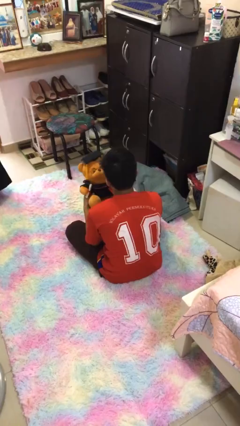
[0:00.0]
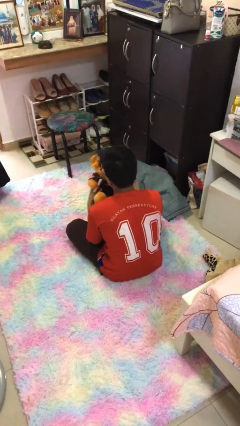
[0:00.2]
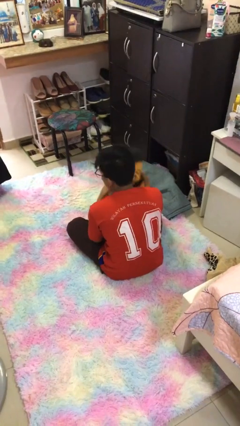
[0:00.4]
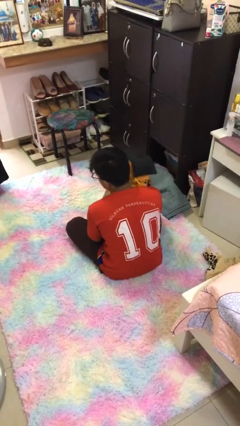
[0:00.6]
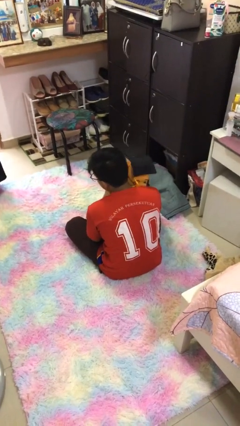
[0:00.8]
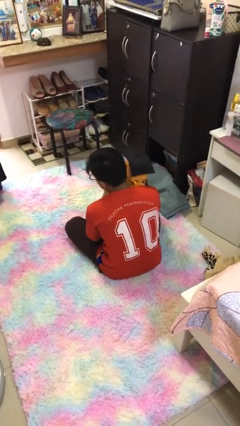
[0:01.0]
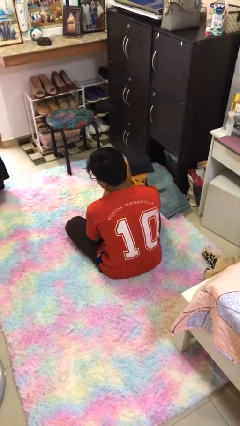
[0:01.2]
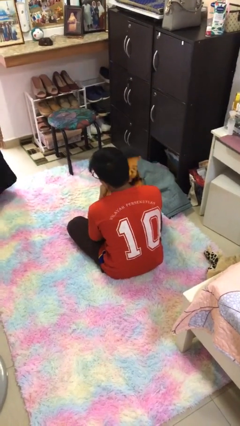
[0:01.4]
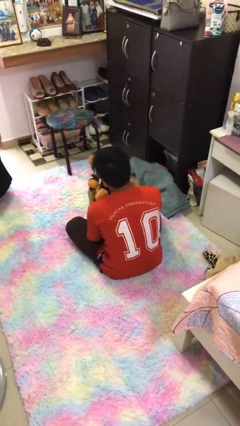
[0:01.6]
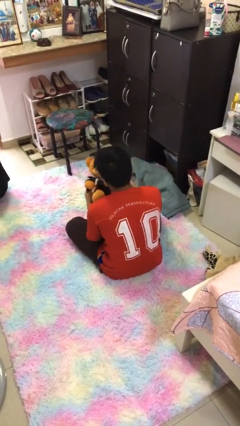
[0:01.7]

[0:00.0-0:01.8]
person hugs stuffed animal

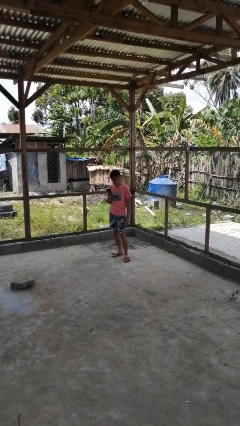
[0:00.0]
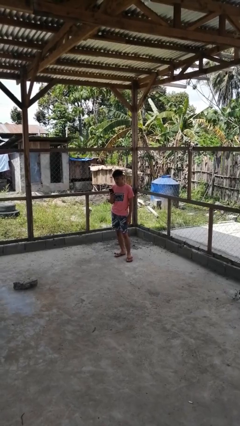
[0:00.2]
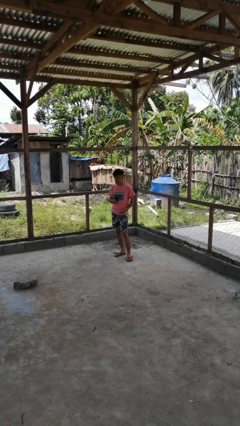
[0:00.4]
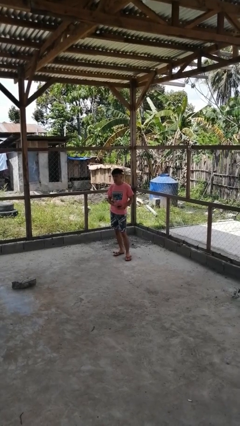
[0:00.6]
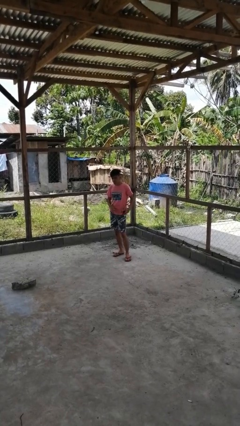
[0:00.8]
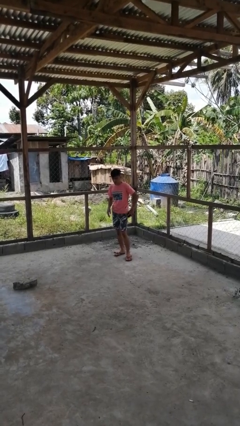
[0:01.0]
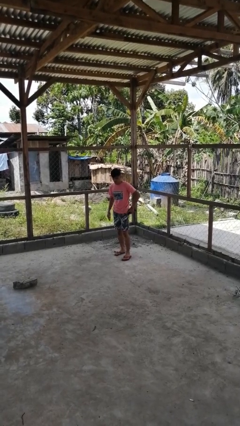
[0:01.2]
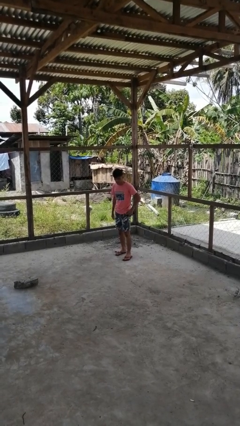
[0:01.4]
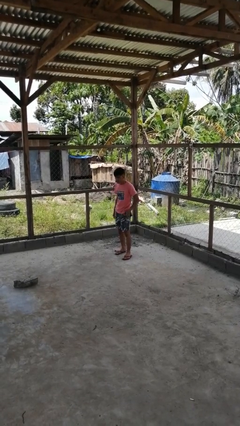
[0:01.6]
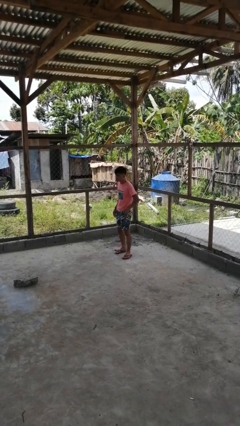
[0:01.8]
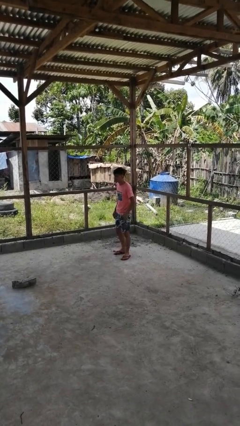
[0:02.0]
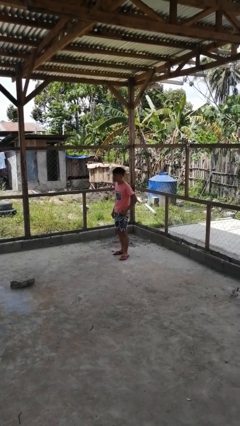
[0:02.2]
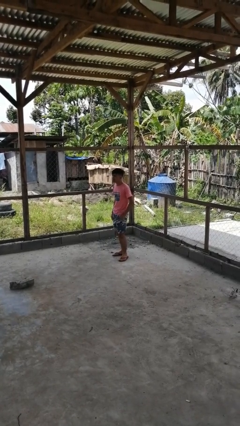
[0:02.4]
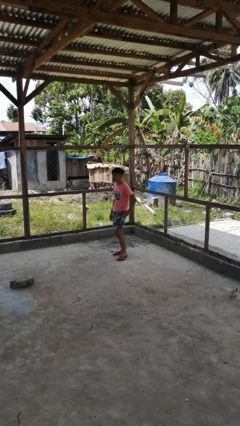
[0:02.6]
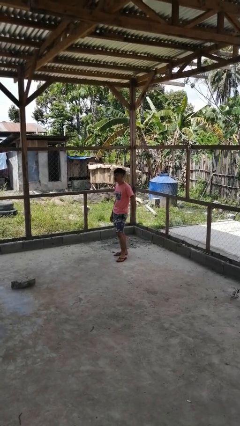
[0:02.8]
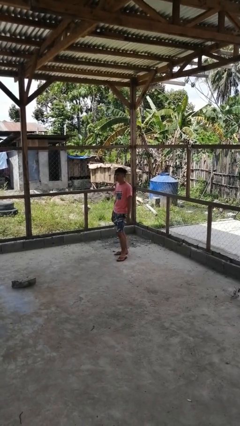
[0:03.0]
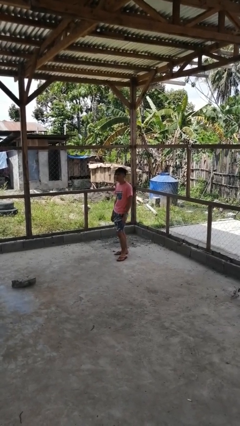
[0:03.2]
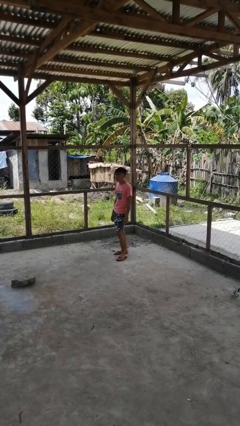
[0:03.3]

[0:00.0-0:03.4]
person puts phone into pocket

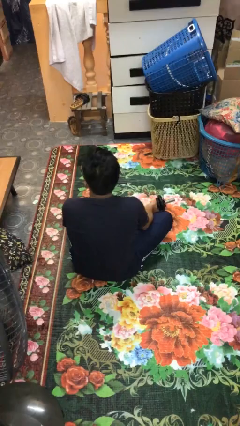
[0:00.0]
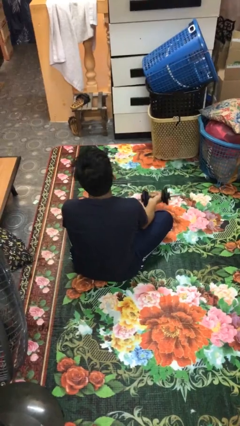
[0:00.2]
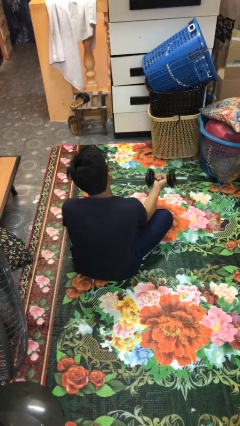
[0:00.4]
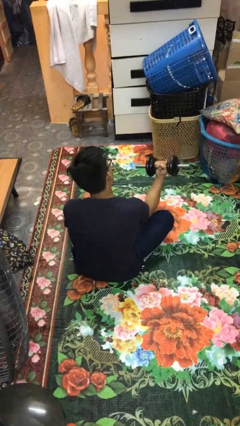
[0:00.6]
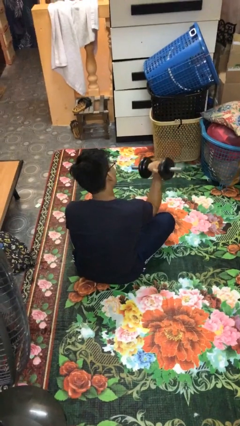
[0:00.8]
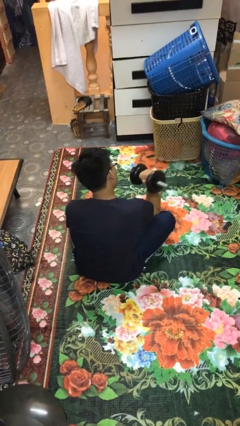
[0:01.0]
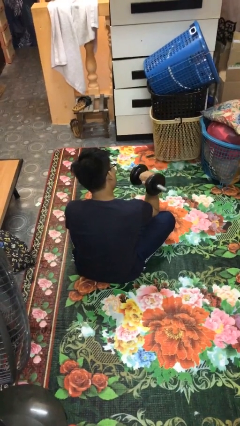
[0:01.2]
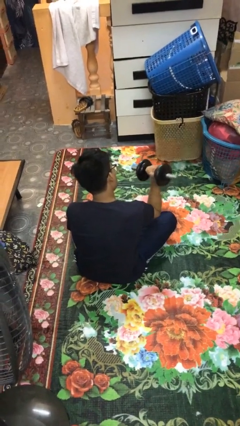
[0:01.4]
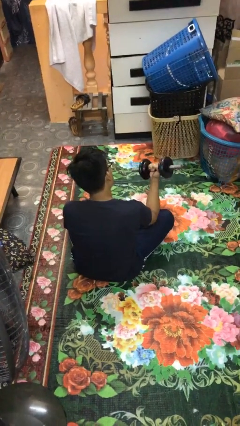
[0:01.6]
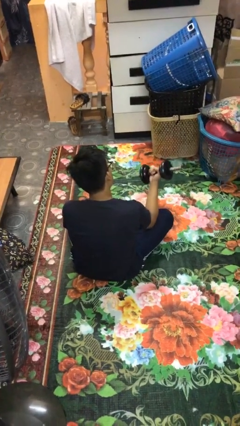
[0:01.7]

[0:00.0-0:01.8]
person lifts dumbbells

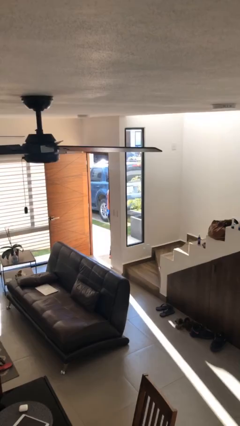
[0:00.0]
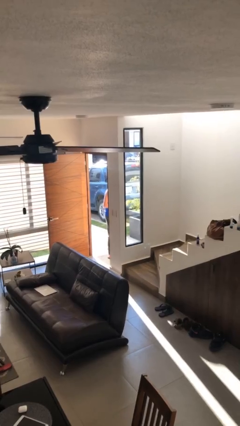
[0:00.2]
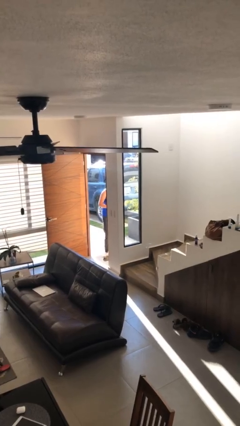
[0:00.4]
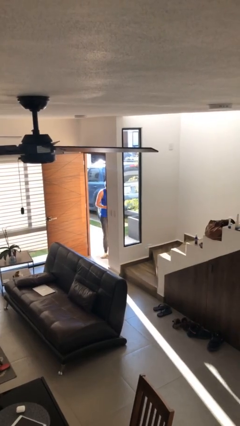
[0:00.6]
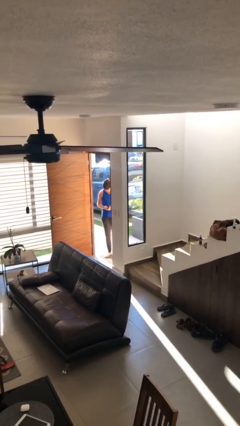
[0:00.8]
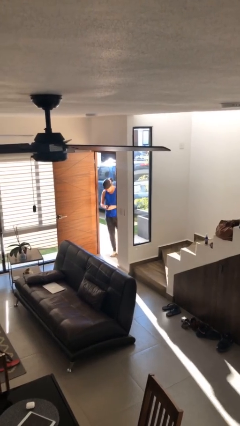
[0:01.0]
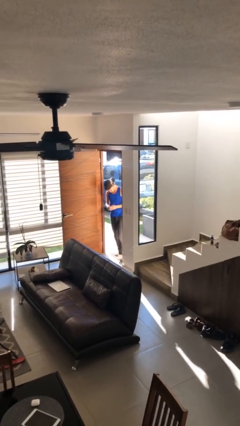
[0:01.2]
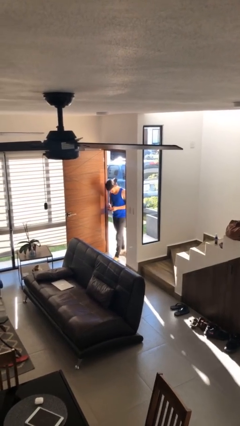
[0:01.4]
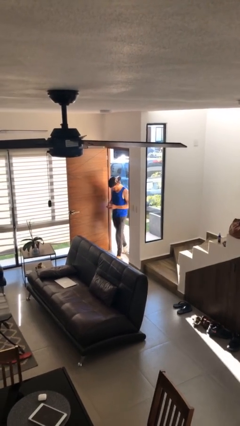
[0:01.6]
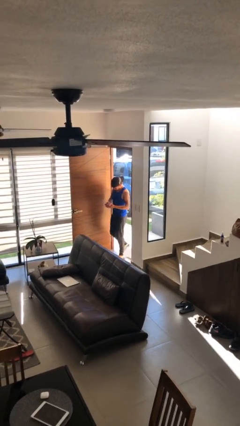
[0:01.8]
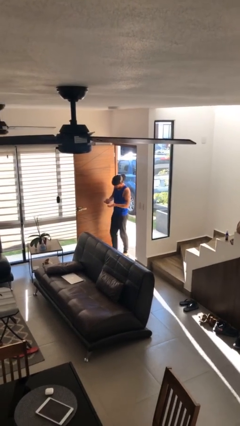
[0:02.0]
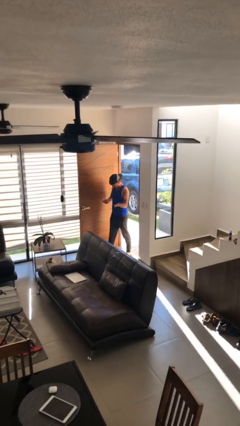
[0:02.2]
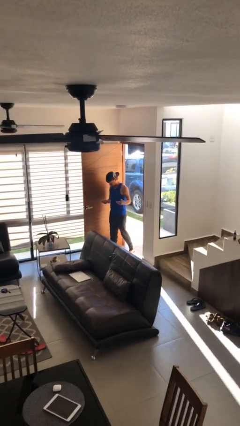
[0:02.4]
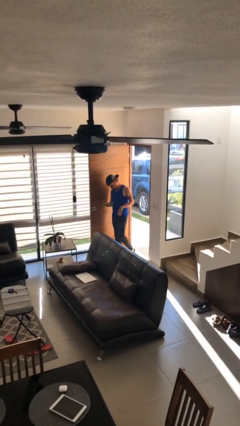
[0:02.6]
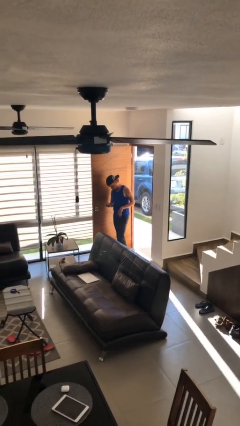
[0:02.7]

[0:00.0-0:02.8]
person enters scene through structure

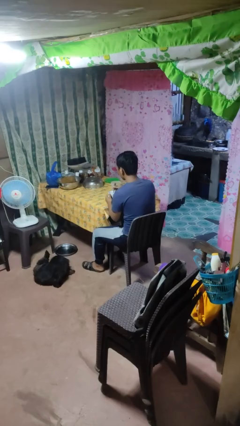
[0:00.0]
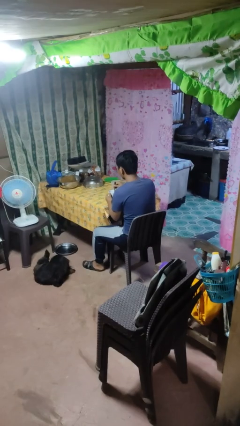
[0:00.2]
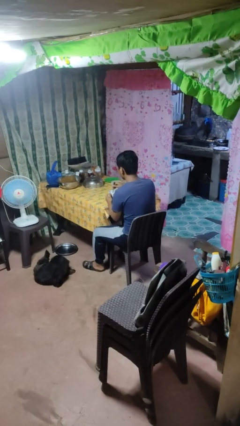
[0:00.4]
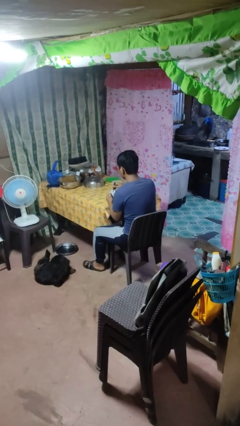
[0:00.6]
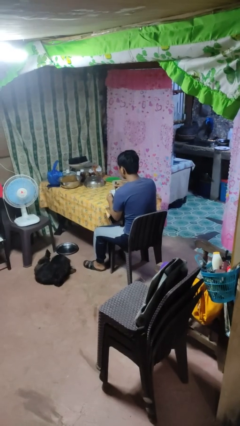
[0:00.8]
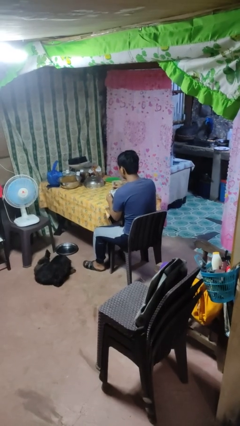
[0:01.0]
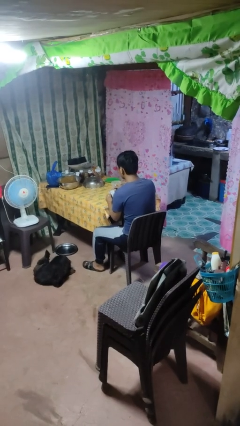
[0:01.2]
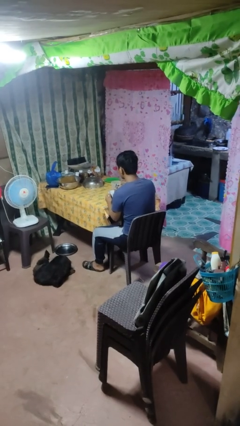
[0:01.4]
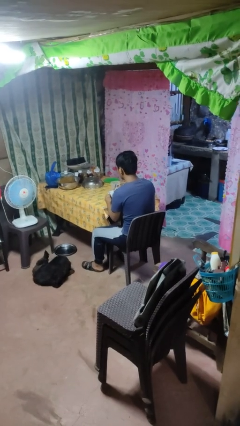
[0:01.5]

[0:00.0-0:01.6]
person stirs mug

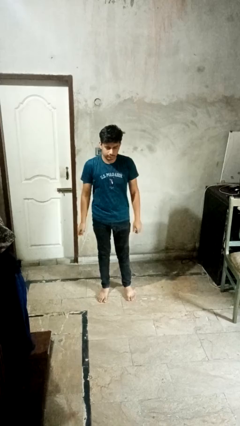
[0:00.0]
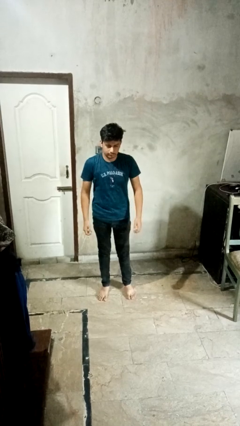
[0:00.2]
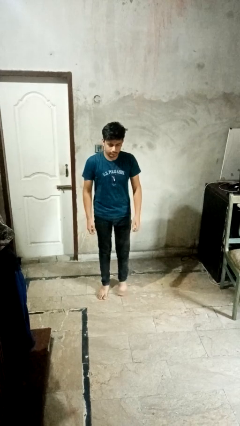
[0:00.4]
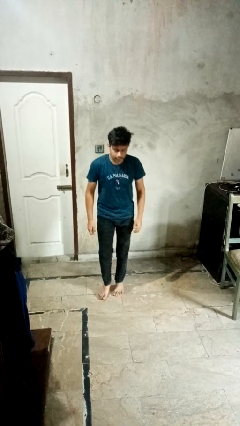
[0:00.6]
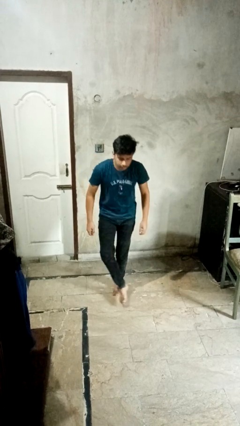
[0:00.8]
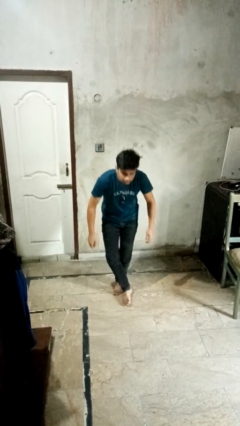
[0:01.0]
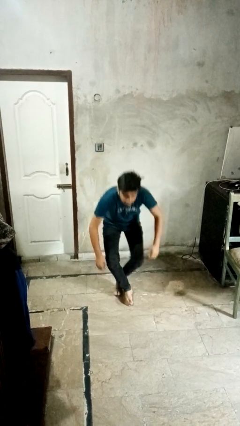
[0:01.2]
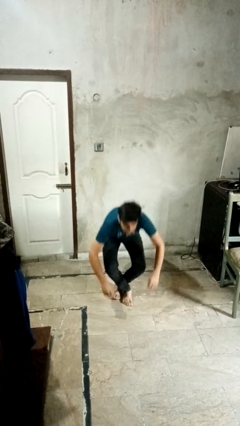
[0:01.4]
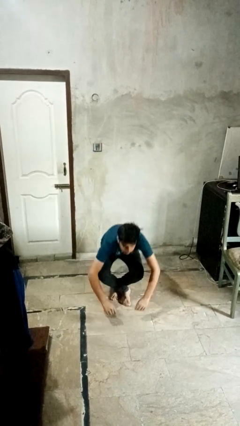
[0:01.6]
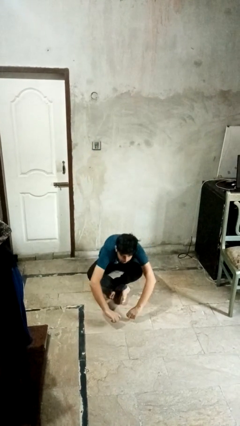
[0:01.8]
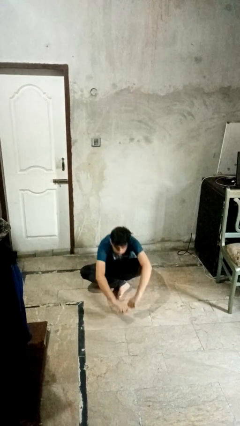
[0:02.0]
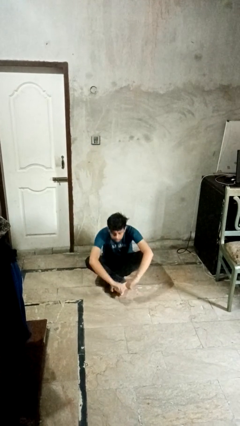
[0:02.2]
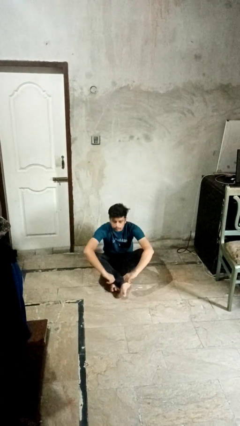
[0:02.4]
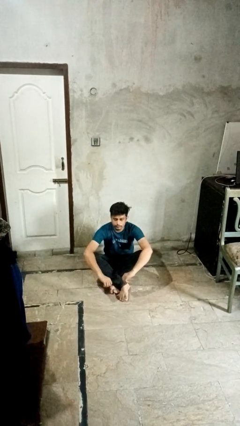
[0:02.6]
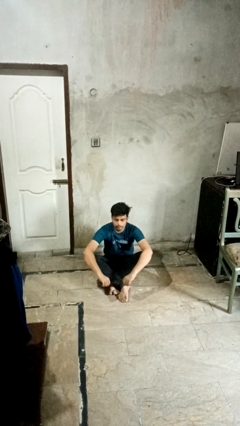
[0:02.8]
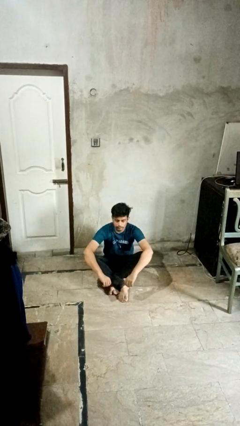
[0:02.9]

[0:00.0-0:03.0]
person sits crisscross

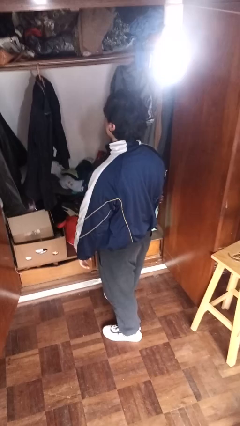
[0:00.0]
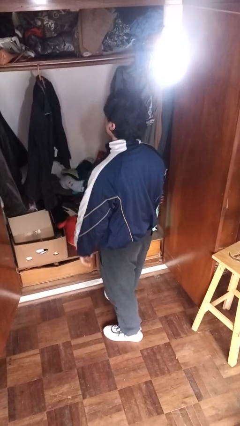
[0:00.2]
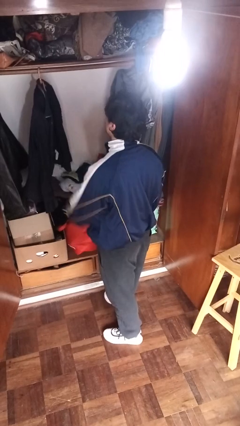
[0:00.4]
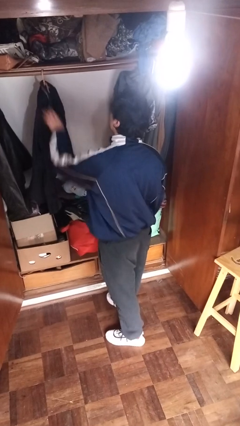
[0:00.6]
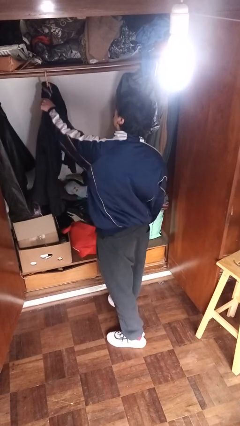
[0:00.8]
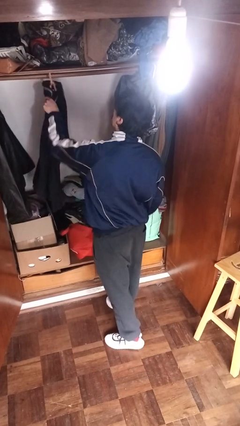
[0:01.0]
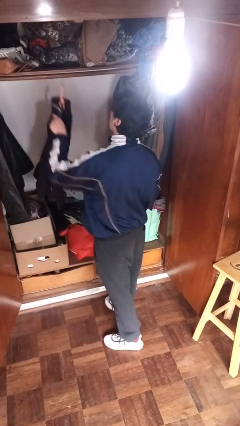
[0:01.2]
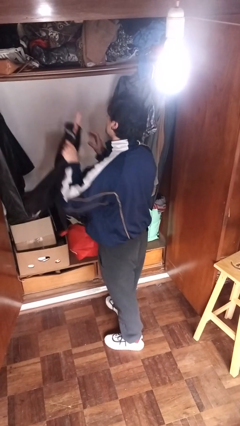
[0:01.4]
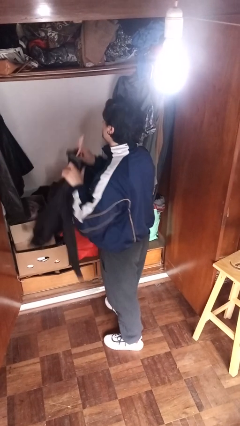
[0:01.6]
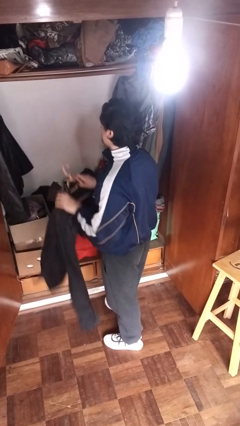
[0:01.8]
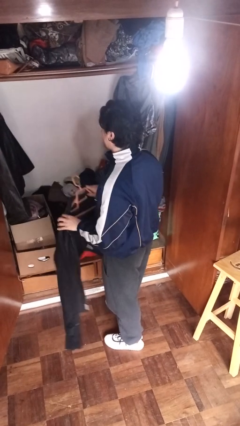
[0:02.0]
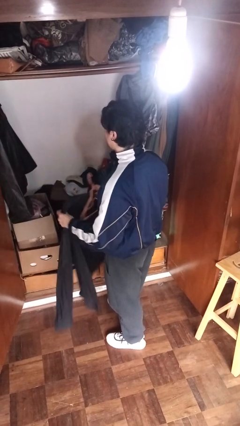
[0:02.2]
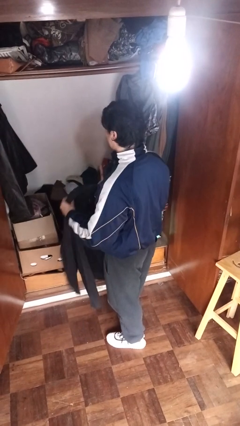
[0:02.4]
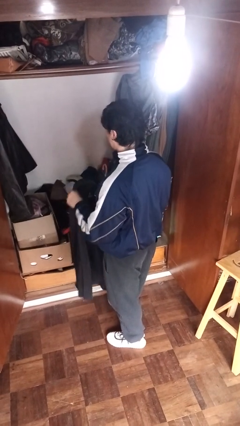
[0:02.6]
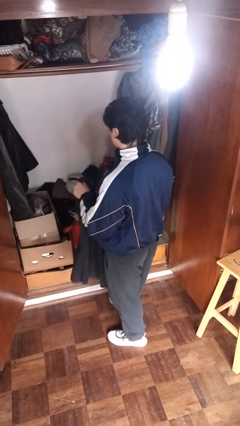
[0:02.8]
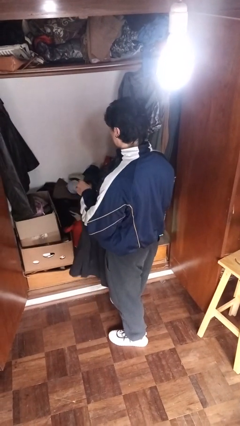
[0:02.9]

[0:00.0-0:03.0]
person takes clothes from closet
